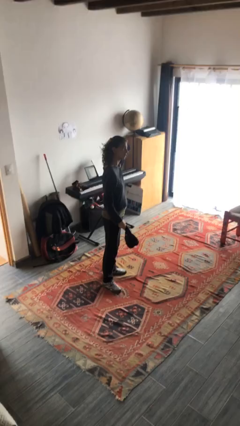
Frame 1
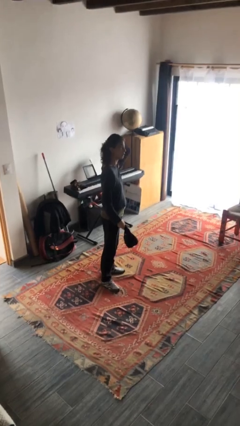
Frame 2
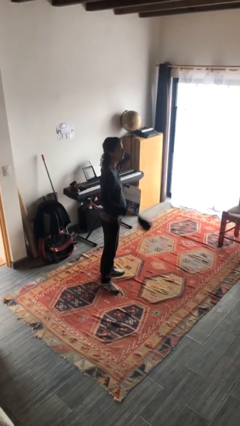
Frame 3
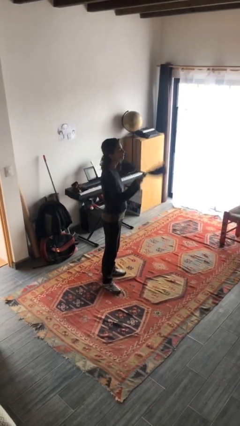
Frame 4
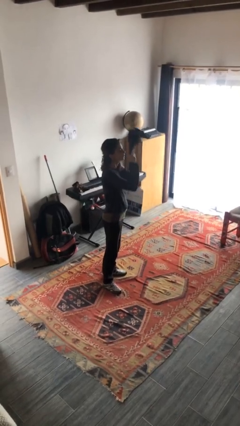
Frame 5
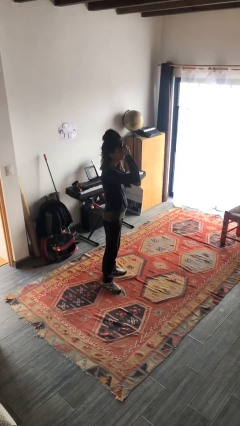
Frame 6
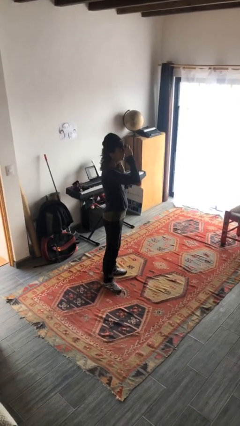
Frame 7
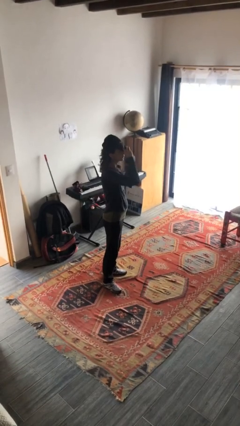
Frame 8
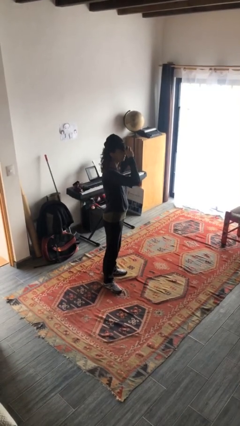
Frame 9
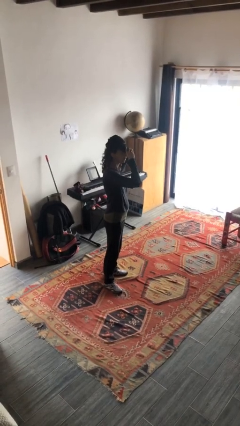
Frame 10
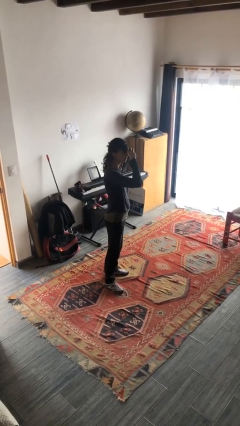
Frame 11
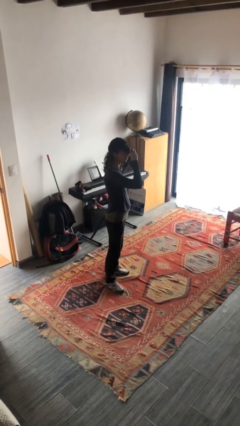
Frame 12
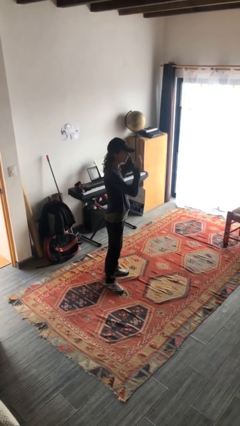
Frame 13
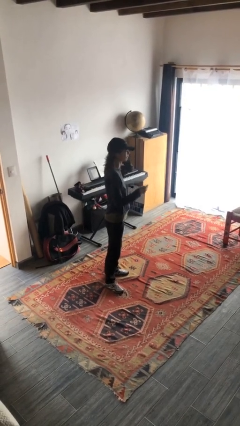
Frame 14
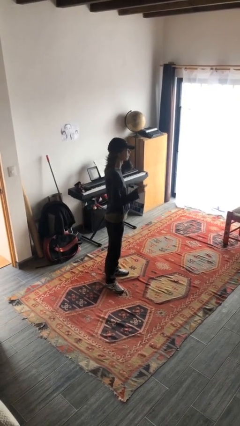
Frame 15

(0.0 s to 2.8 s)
person puts on hat

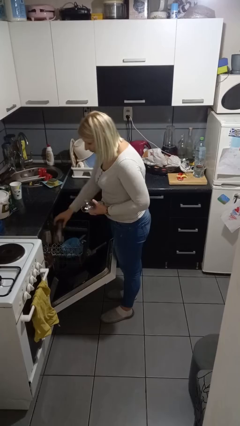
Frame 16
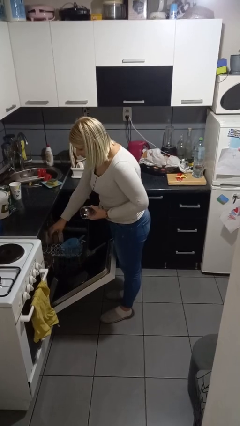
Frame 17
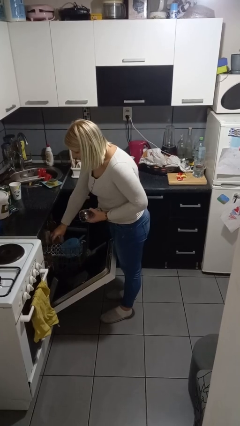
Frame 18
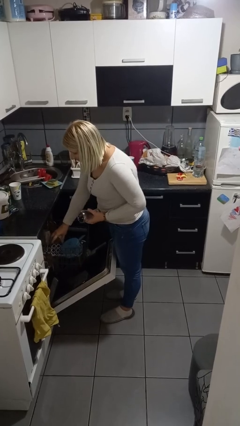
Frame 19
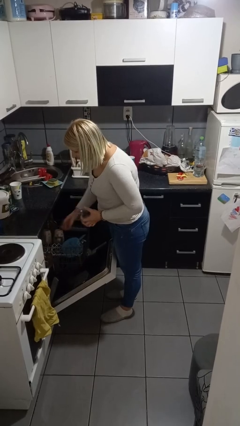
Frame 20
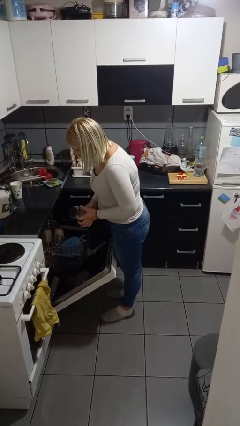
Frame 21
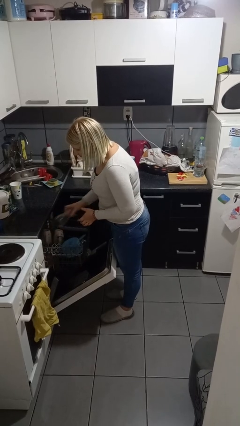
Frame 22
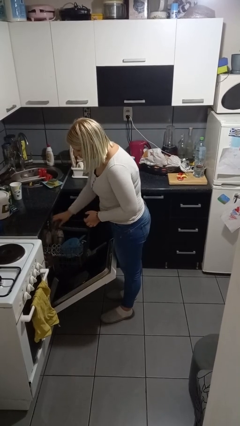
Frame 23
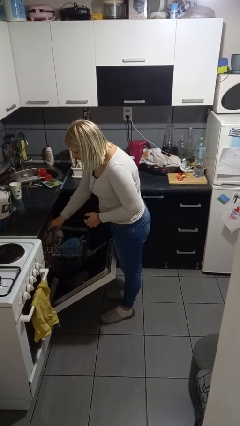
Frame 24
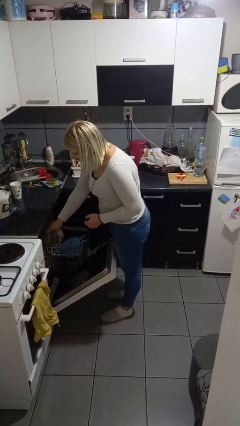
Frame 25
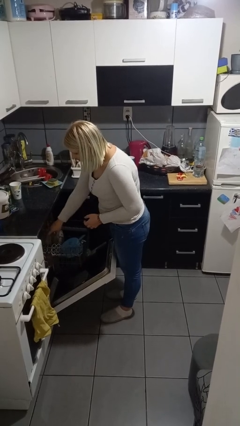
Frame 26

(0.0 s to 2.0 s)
person loads dishwasher

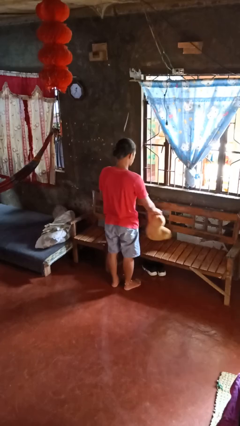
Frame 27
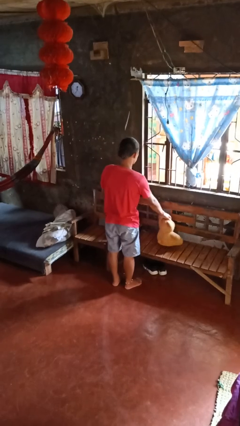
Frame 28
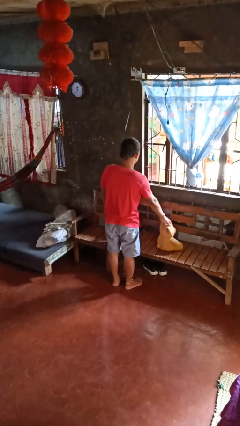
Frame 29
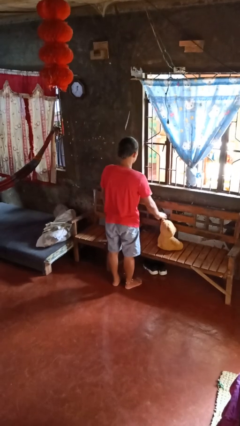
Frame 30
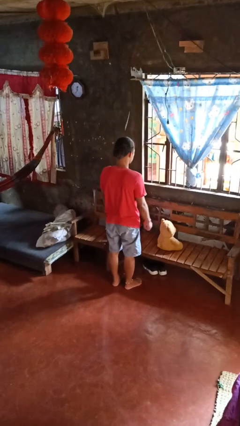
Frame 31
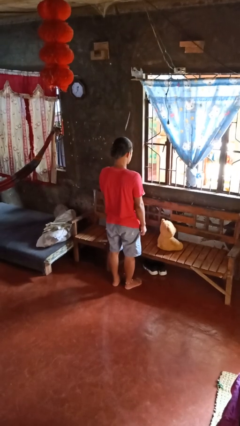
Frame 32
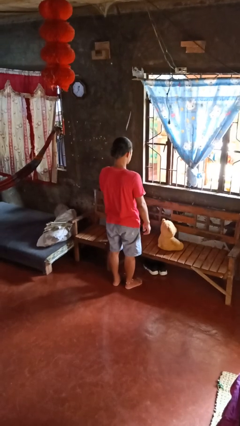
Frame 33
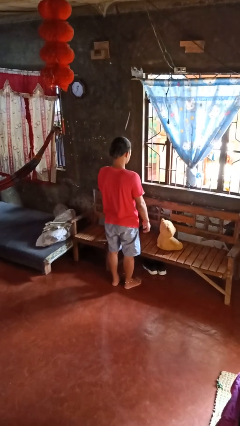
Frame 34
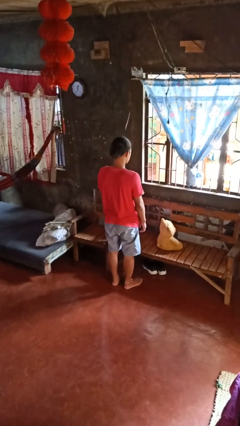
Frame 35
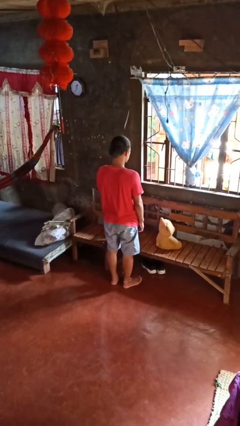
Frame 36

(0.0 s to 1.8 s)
person puts down object on couch

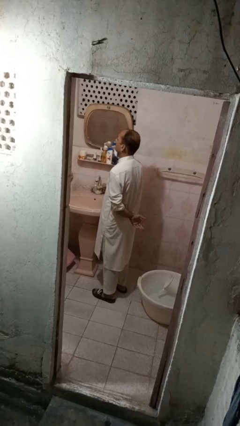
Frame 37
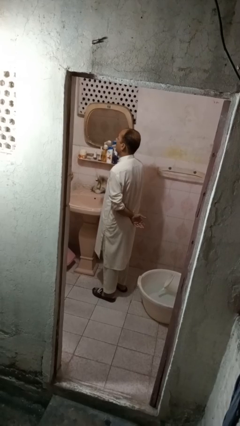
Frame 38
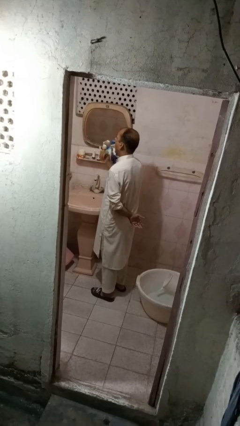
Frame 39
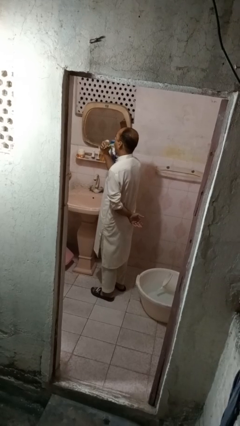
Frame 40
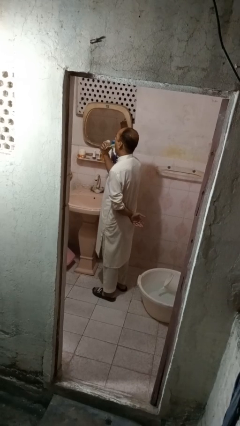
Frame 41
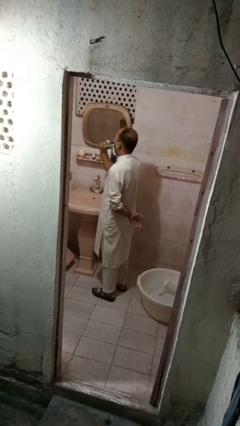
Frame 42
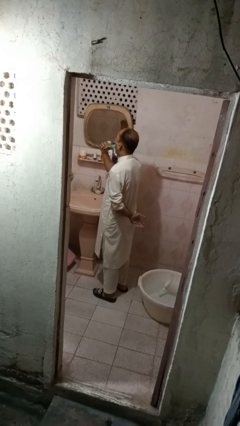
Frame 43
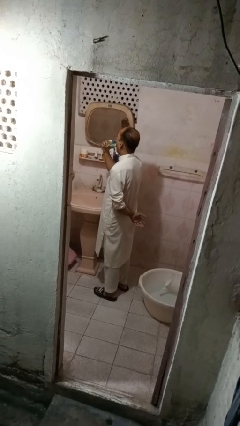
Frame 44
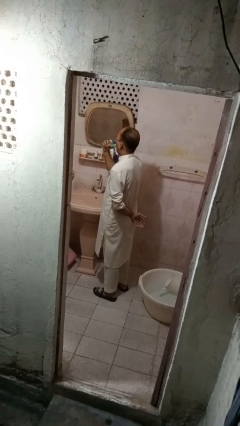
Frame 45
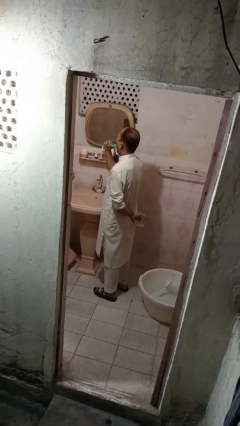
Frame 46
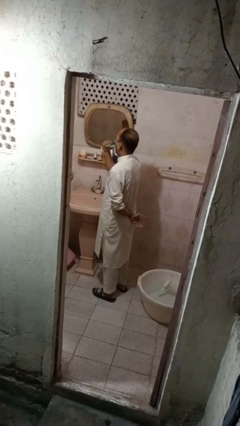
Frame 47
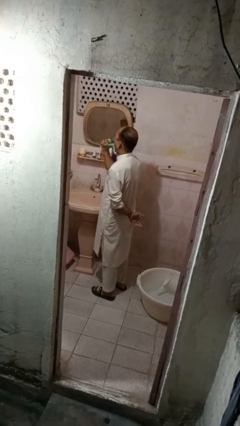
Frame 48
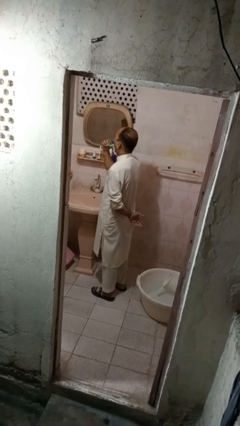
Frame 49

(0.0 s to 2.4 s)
person brushes teeth

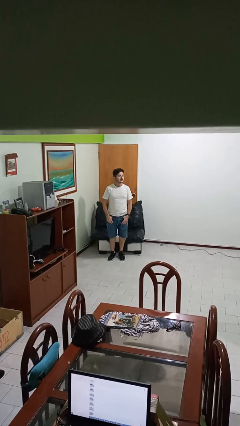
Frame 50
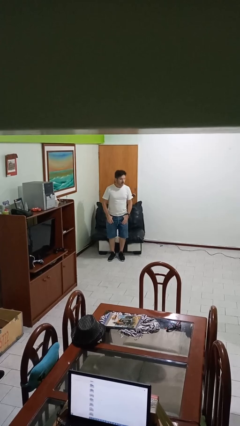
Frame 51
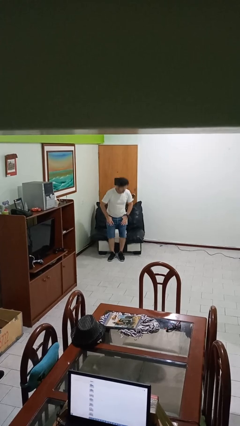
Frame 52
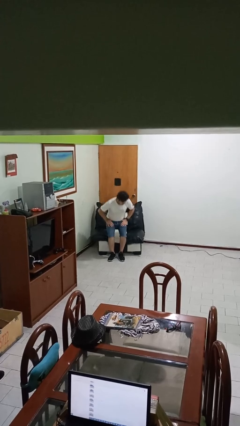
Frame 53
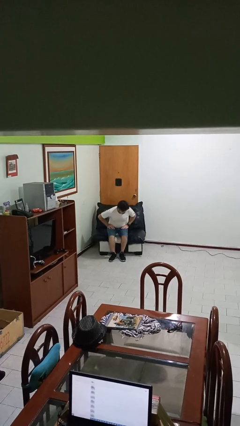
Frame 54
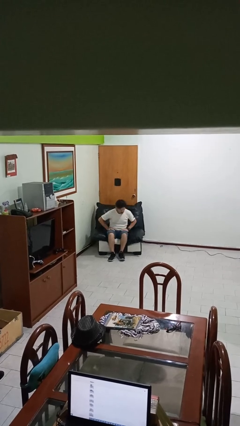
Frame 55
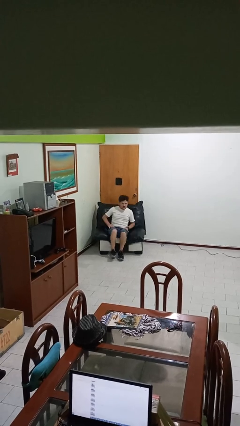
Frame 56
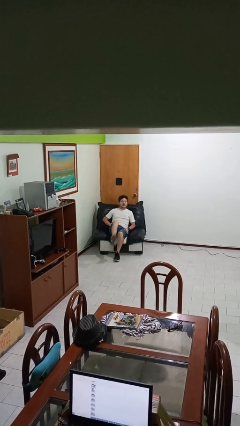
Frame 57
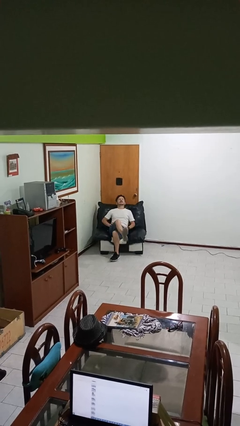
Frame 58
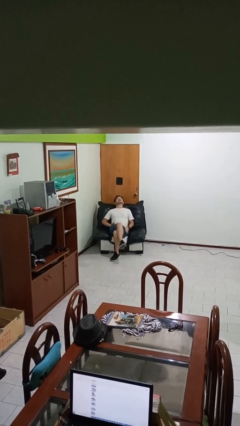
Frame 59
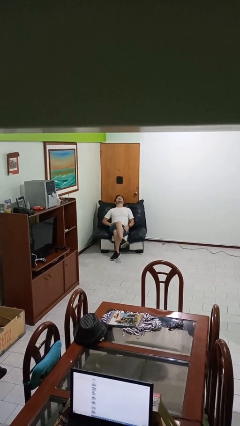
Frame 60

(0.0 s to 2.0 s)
person lies down on couch

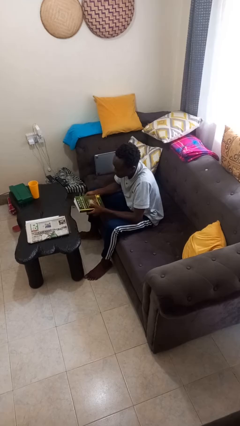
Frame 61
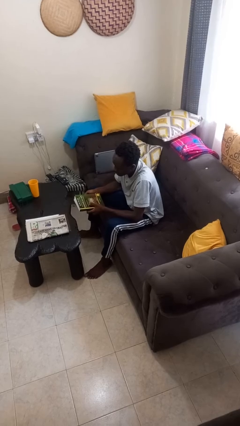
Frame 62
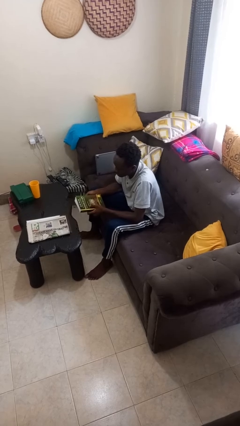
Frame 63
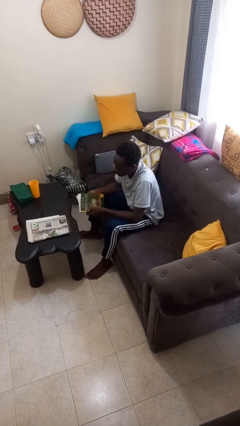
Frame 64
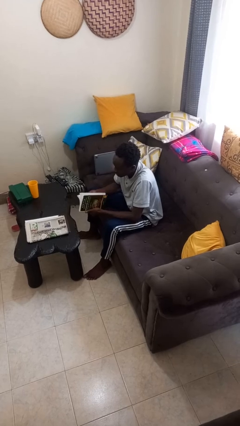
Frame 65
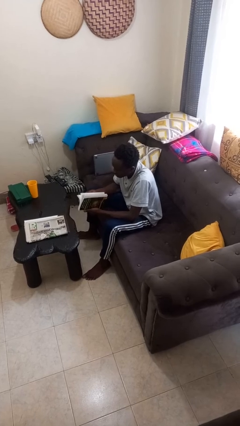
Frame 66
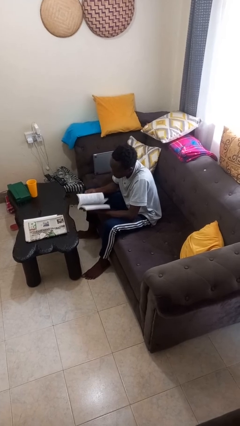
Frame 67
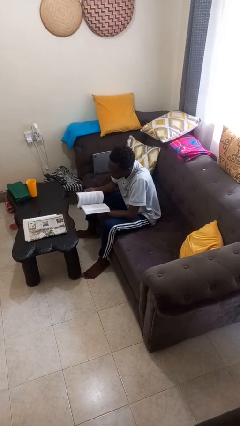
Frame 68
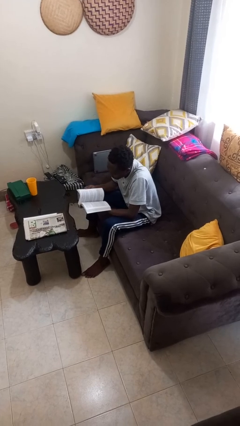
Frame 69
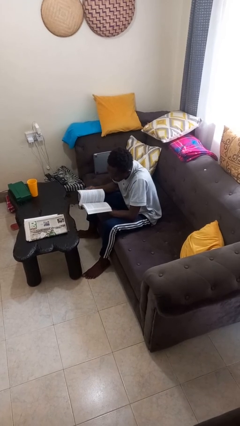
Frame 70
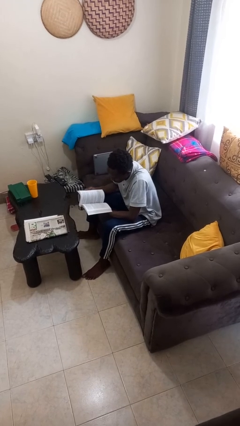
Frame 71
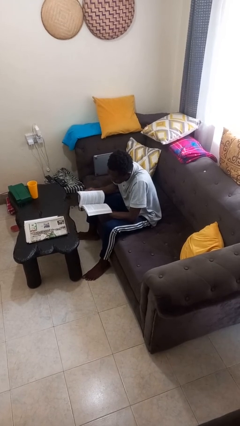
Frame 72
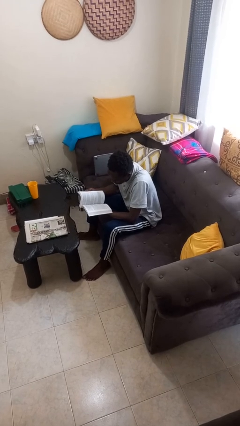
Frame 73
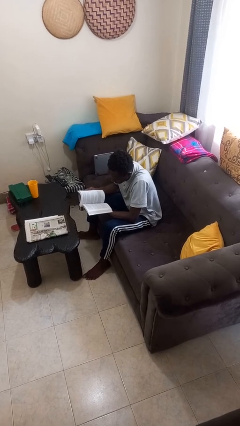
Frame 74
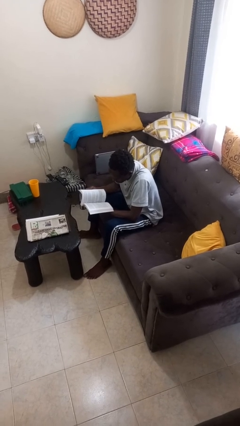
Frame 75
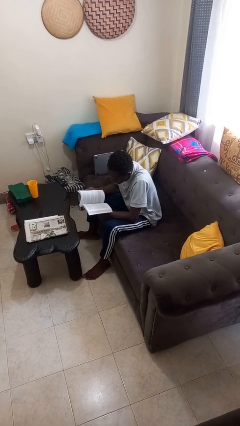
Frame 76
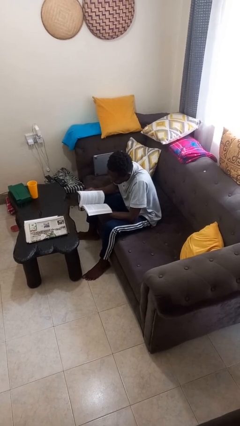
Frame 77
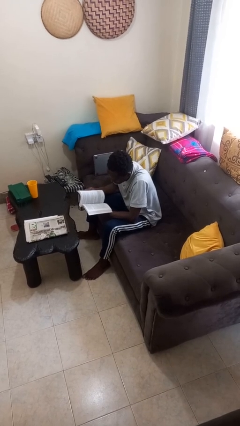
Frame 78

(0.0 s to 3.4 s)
person reads book

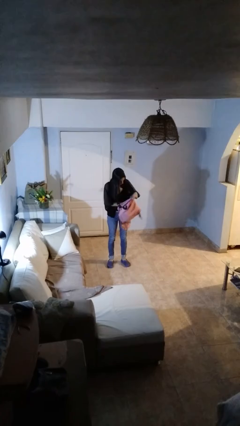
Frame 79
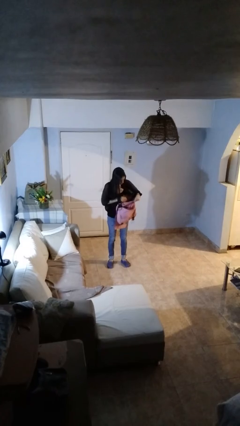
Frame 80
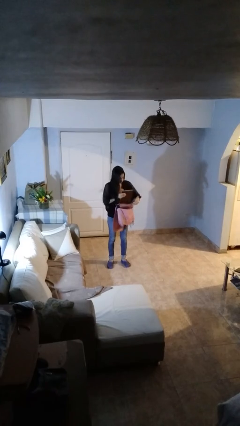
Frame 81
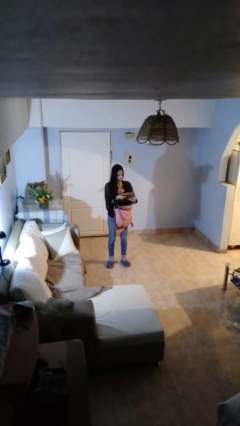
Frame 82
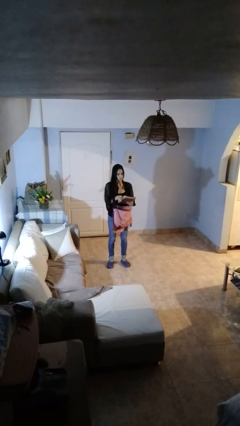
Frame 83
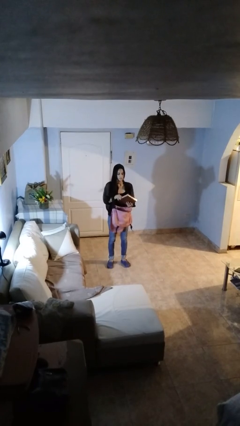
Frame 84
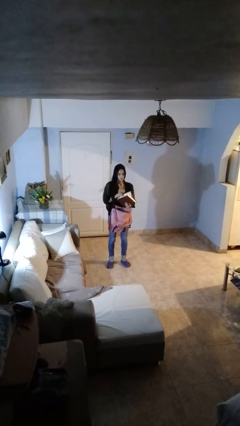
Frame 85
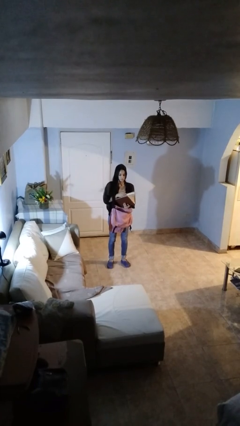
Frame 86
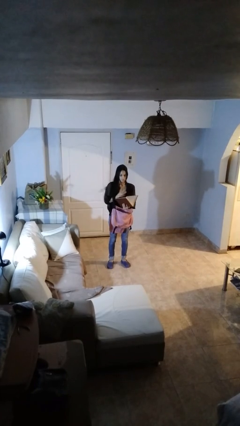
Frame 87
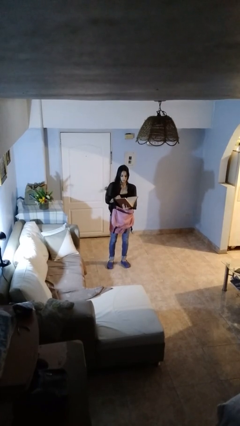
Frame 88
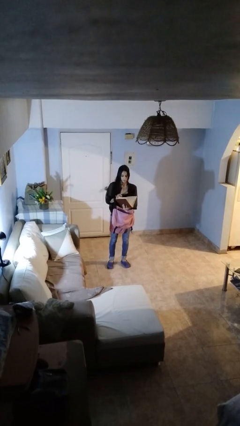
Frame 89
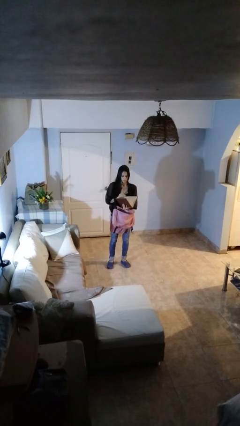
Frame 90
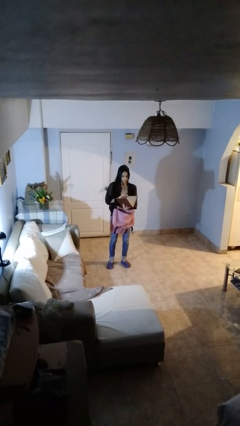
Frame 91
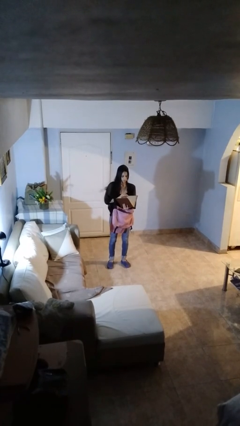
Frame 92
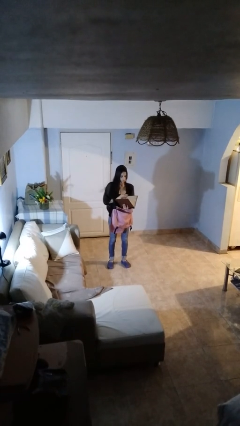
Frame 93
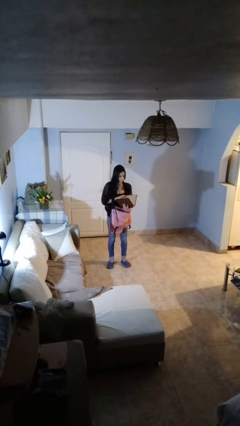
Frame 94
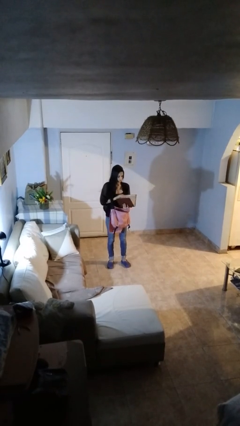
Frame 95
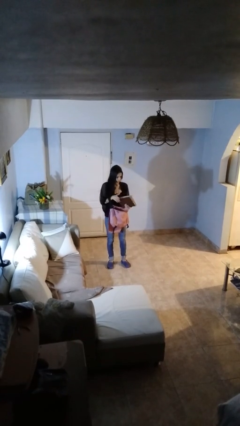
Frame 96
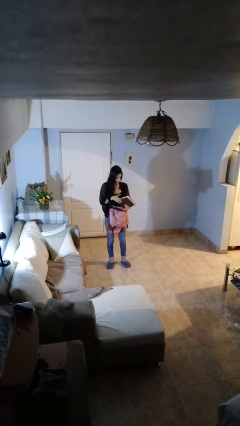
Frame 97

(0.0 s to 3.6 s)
person takes object from backpack
